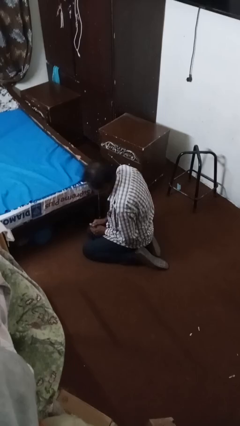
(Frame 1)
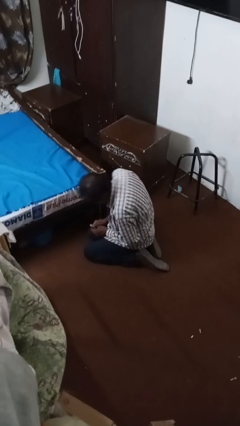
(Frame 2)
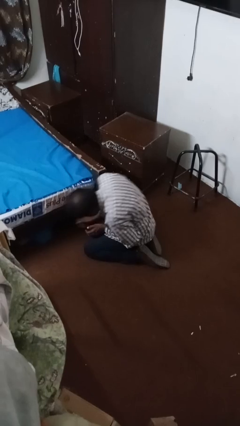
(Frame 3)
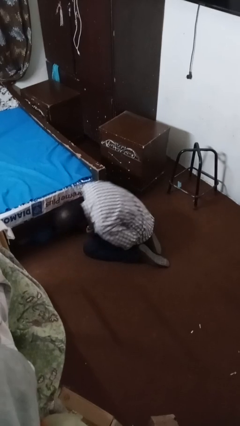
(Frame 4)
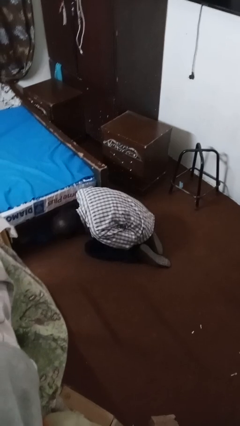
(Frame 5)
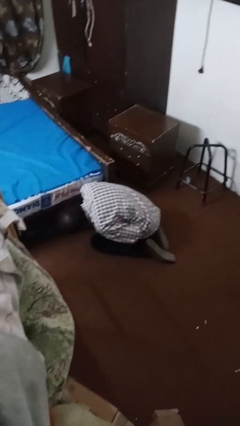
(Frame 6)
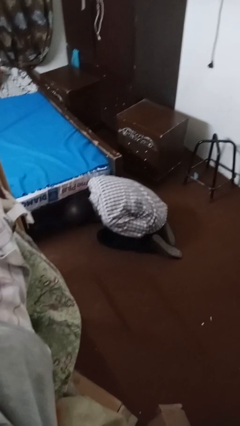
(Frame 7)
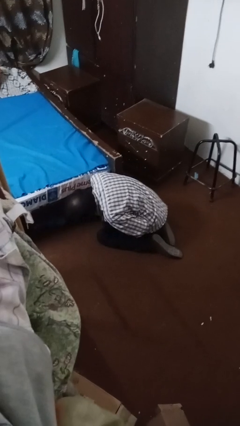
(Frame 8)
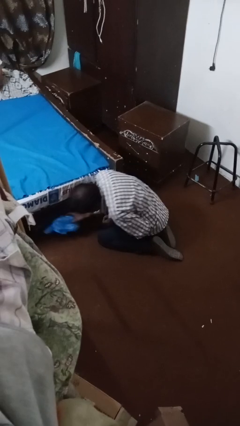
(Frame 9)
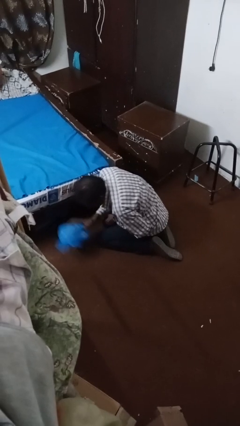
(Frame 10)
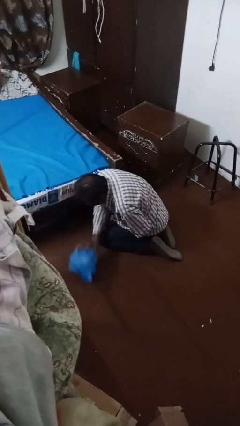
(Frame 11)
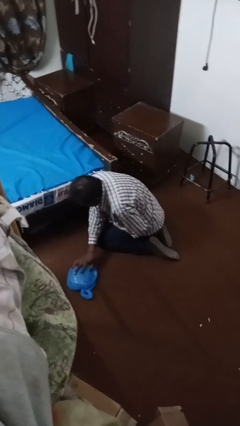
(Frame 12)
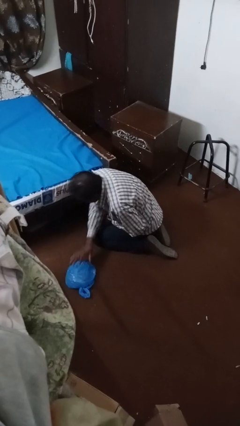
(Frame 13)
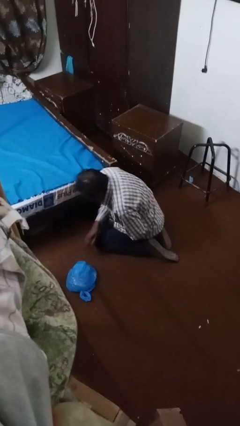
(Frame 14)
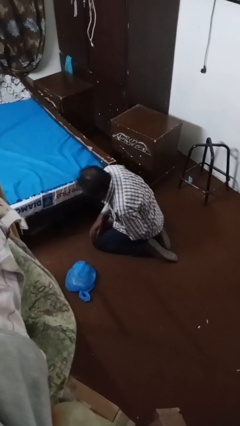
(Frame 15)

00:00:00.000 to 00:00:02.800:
person searches under bed

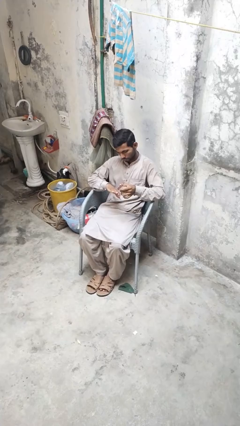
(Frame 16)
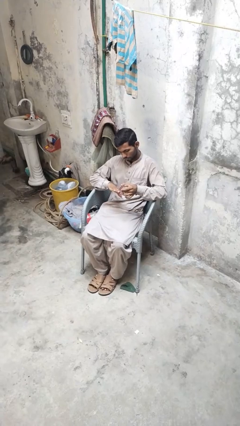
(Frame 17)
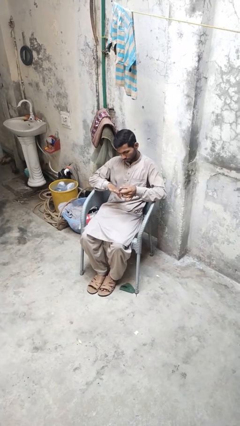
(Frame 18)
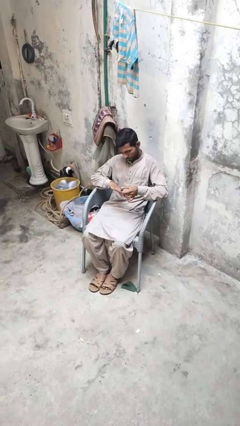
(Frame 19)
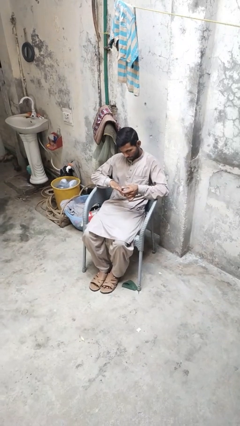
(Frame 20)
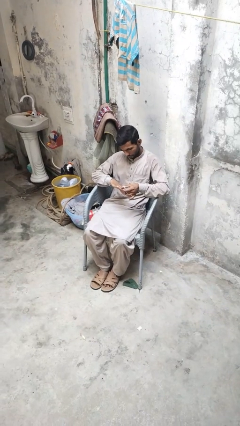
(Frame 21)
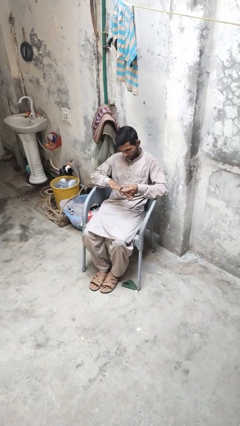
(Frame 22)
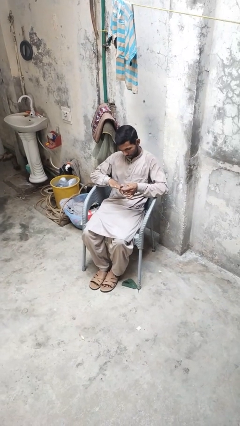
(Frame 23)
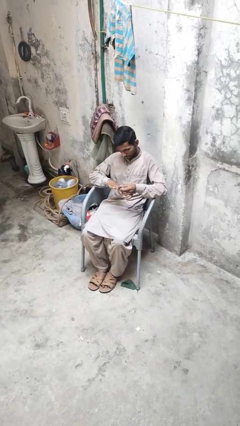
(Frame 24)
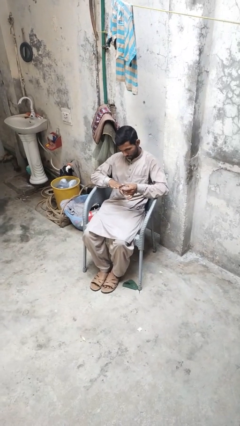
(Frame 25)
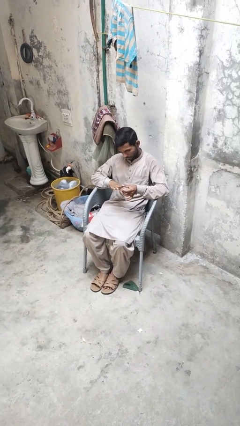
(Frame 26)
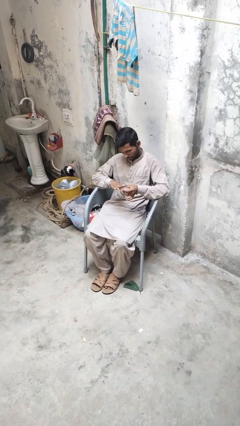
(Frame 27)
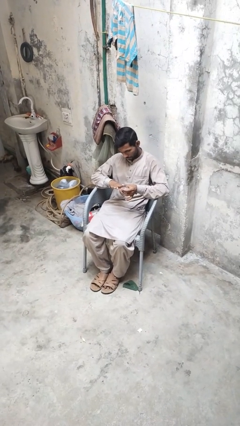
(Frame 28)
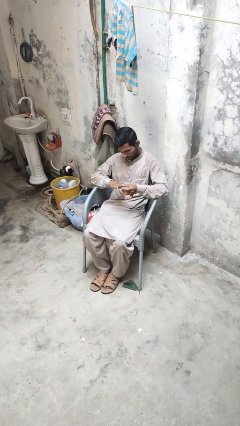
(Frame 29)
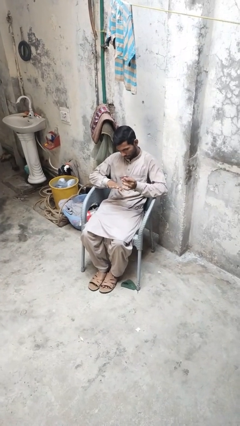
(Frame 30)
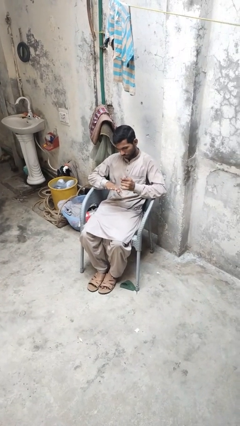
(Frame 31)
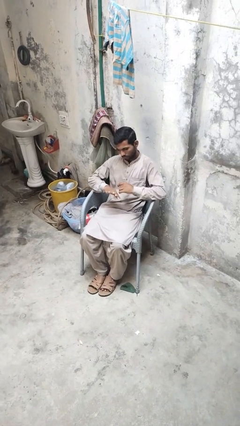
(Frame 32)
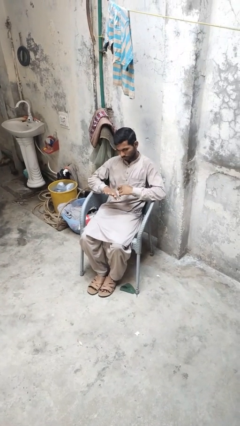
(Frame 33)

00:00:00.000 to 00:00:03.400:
person clips fingernails

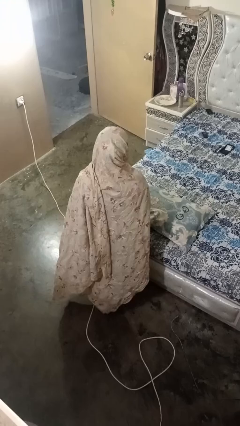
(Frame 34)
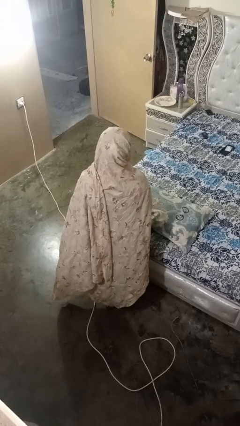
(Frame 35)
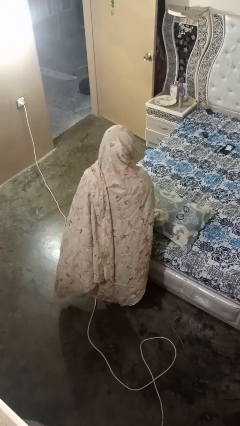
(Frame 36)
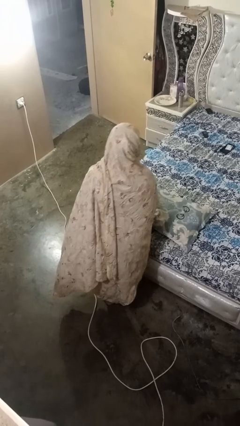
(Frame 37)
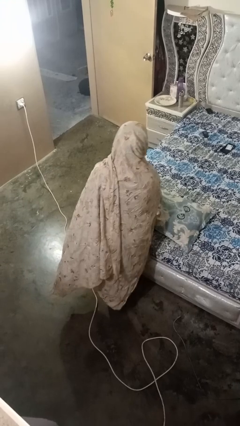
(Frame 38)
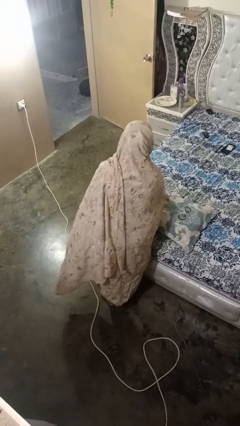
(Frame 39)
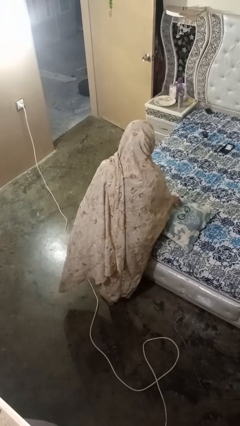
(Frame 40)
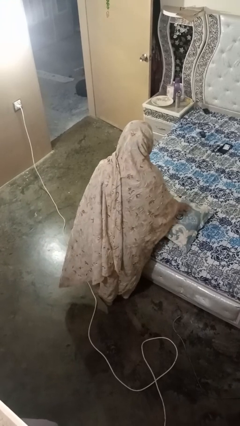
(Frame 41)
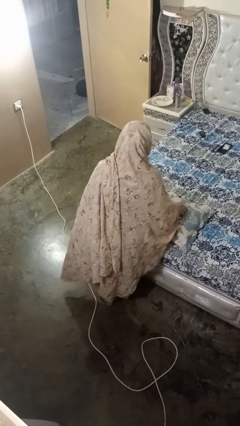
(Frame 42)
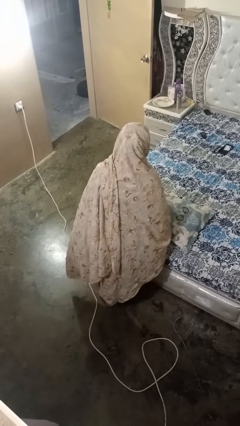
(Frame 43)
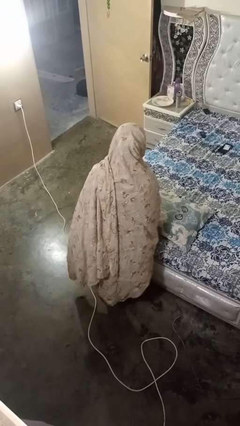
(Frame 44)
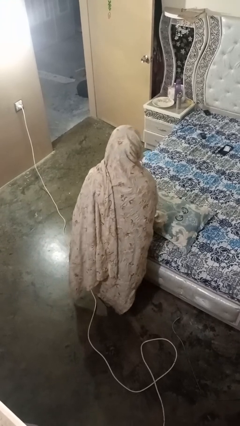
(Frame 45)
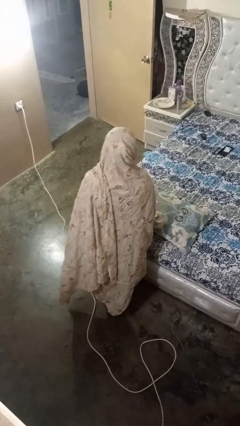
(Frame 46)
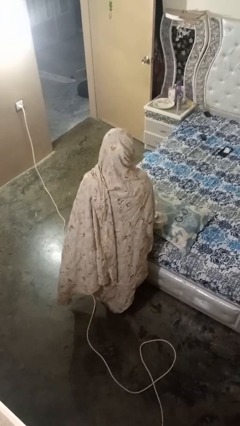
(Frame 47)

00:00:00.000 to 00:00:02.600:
person taps object with finger

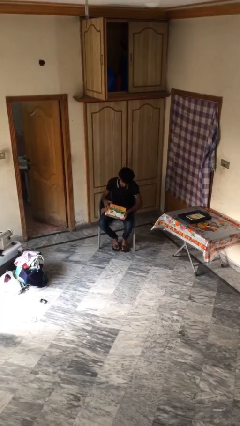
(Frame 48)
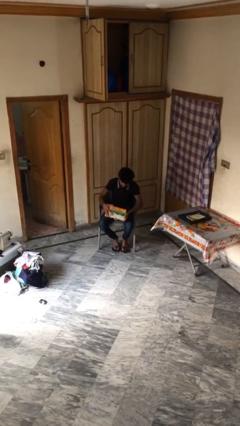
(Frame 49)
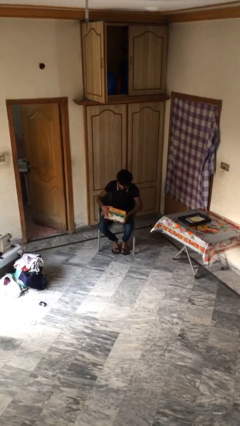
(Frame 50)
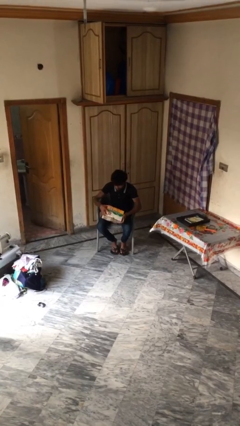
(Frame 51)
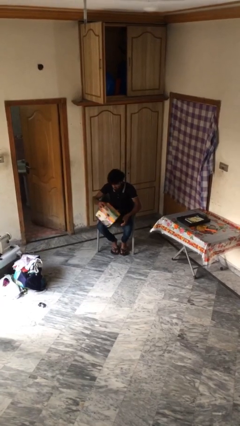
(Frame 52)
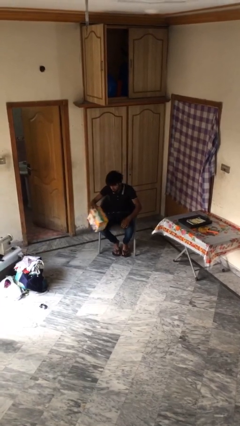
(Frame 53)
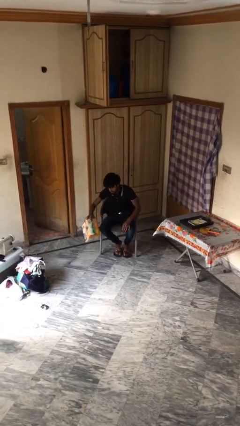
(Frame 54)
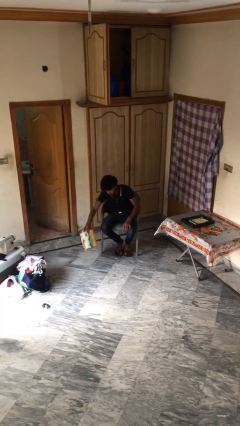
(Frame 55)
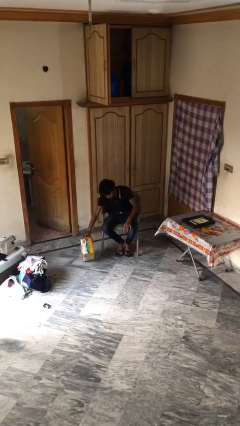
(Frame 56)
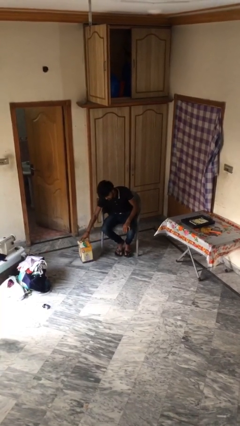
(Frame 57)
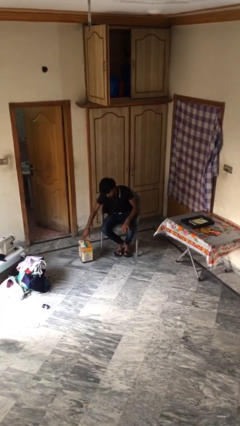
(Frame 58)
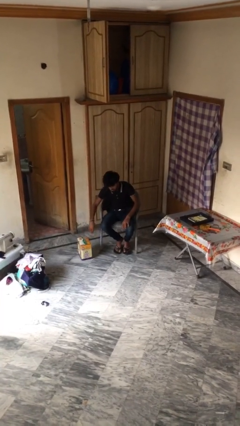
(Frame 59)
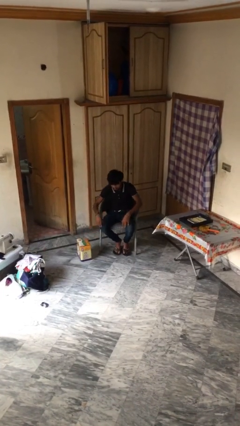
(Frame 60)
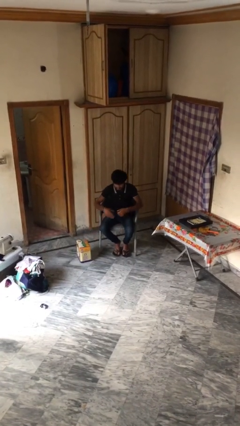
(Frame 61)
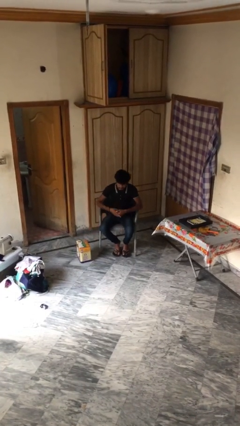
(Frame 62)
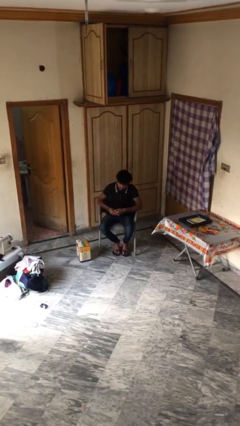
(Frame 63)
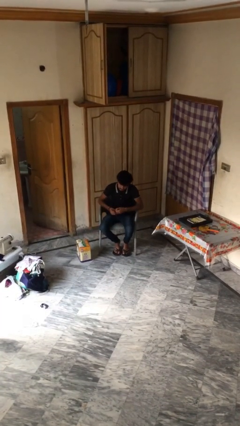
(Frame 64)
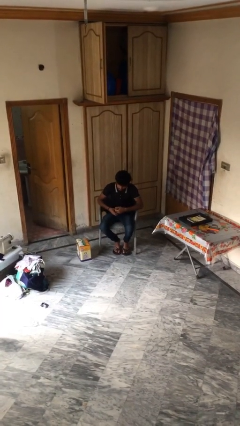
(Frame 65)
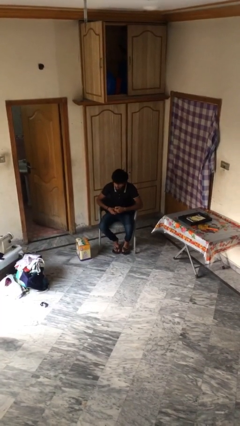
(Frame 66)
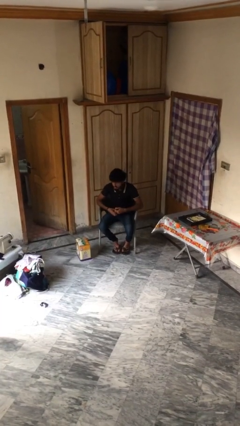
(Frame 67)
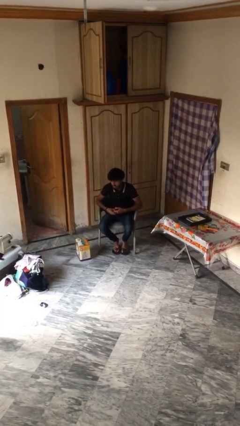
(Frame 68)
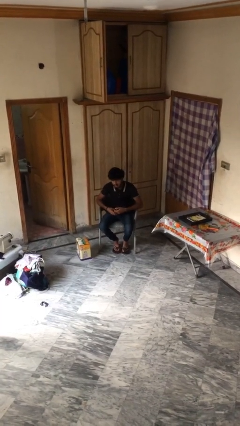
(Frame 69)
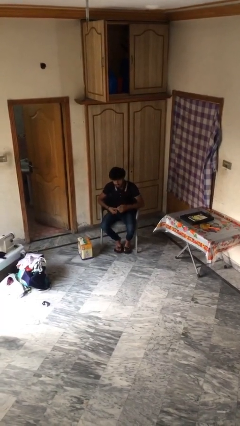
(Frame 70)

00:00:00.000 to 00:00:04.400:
person puts down object on floor

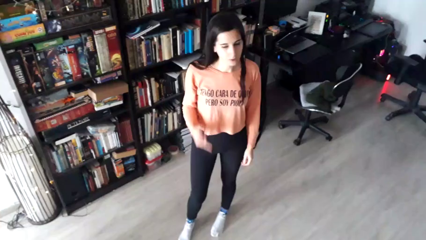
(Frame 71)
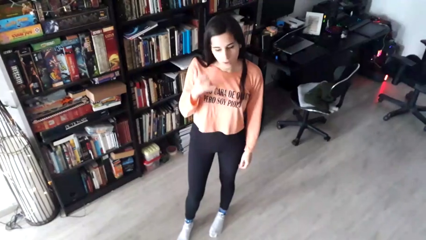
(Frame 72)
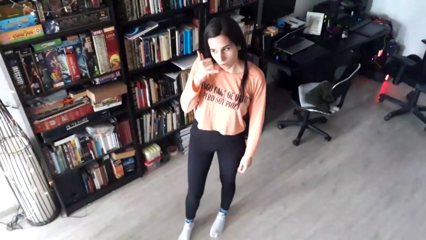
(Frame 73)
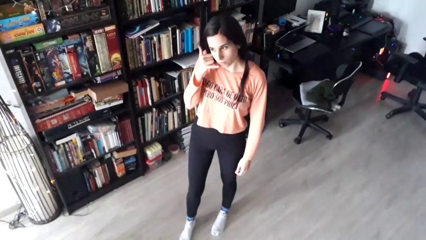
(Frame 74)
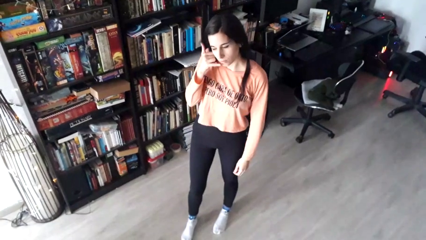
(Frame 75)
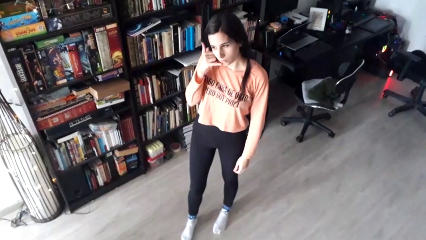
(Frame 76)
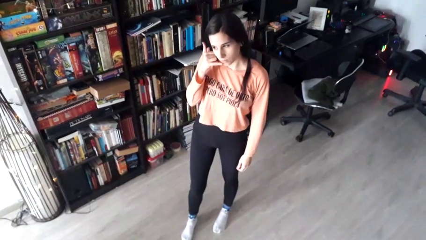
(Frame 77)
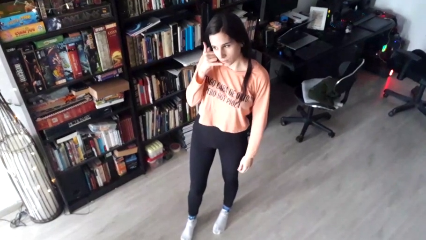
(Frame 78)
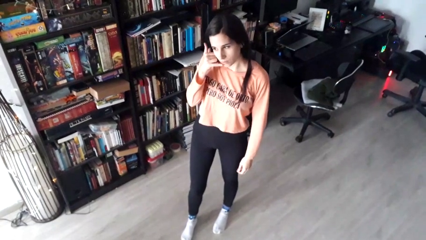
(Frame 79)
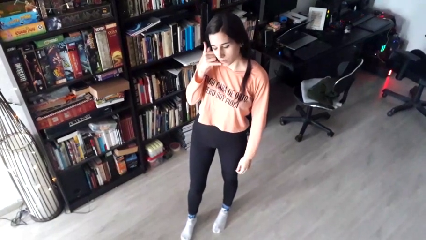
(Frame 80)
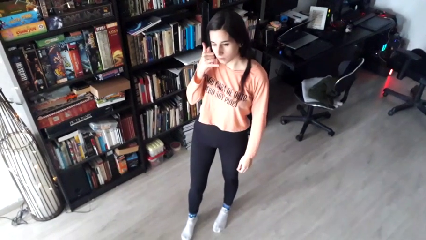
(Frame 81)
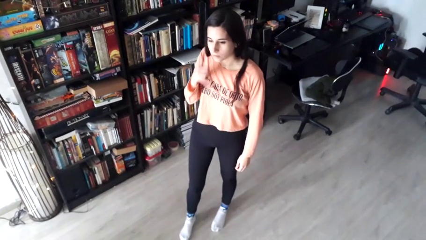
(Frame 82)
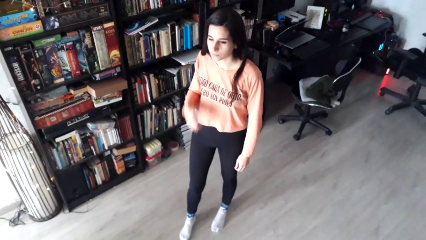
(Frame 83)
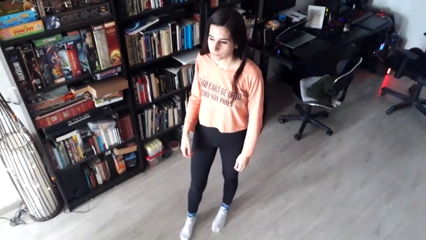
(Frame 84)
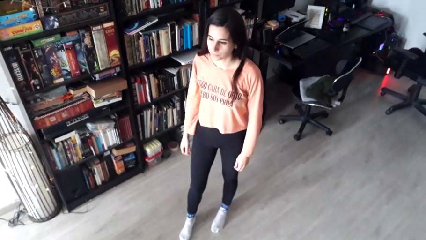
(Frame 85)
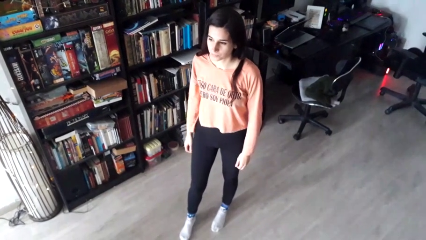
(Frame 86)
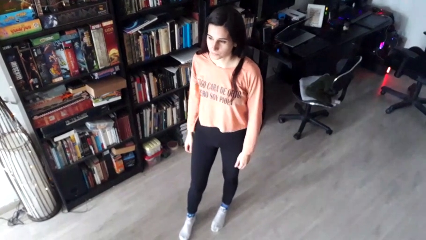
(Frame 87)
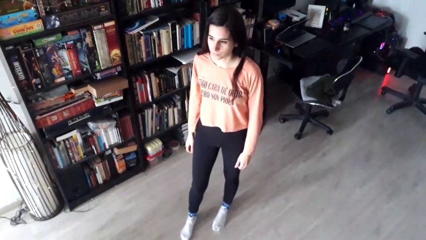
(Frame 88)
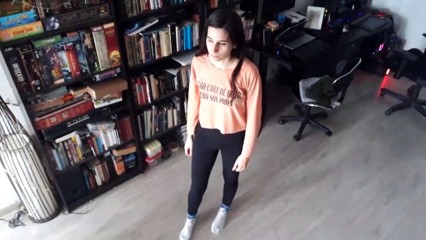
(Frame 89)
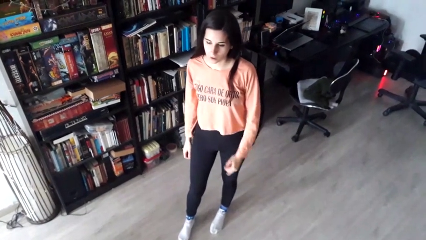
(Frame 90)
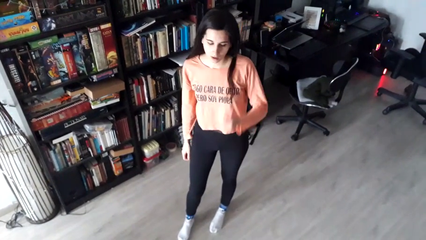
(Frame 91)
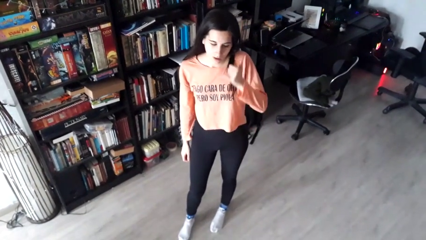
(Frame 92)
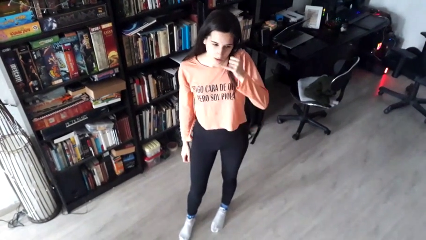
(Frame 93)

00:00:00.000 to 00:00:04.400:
person gestures call me

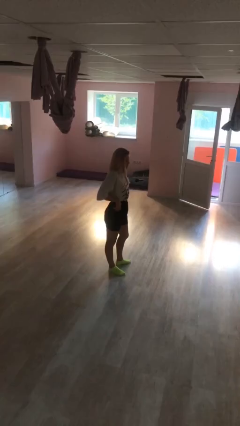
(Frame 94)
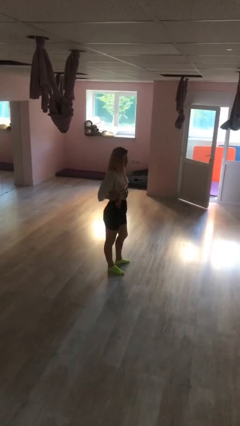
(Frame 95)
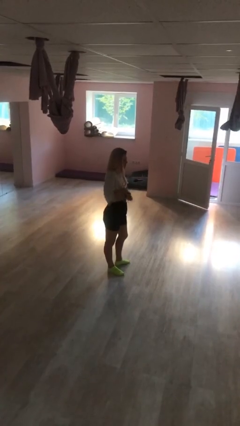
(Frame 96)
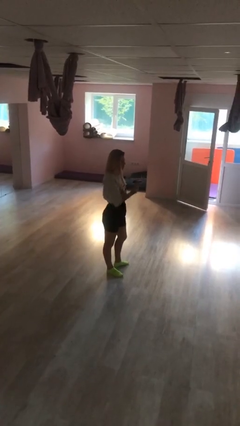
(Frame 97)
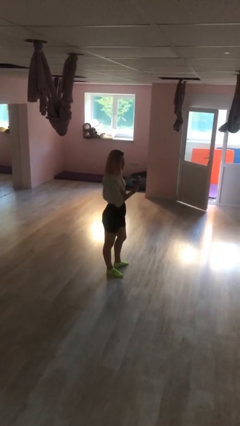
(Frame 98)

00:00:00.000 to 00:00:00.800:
person takes phone from pocket
